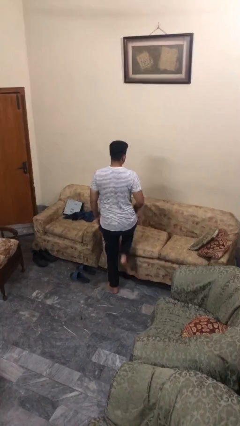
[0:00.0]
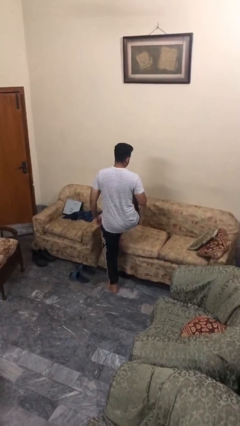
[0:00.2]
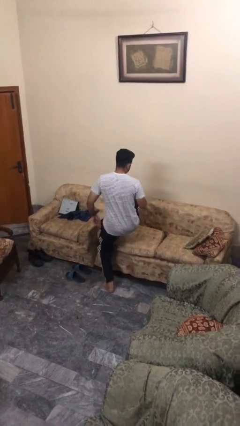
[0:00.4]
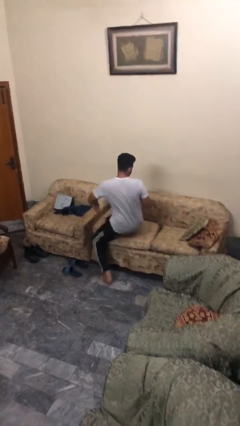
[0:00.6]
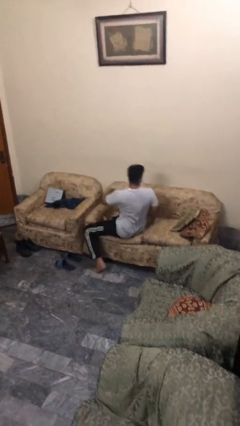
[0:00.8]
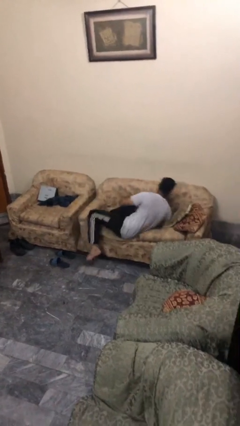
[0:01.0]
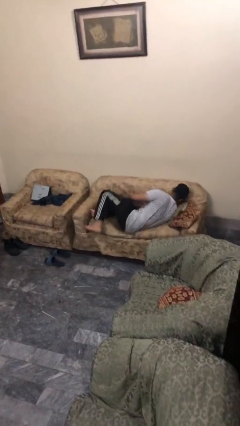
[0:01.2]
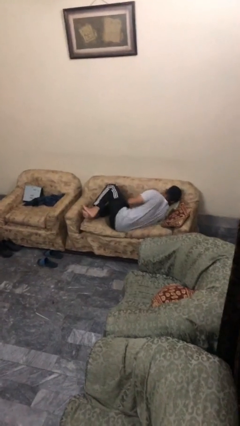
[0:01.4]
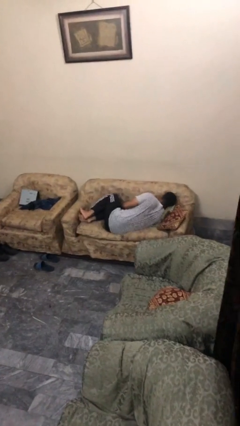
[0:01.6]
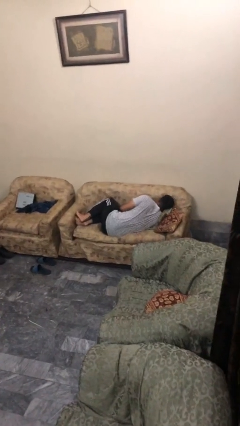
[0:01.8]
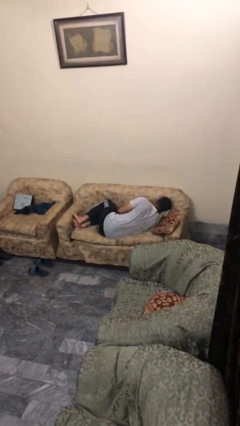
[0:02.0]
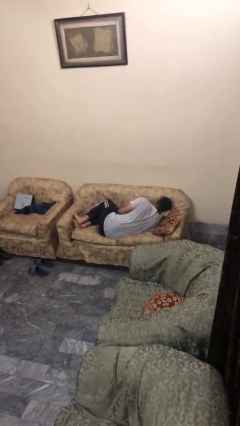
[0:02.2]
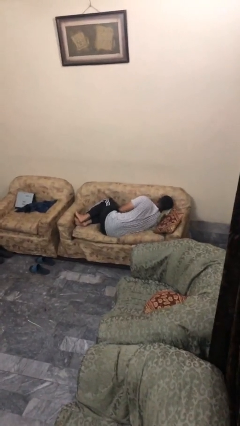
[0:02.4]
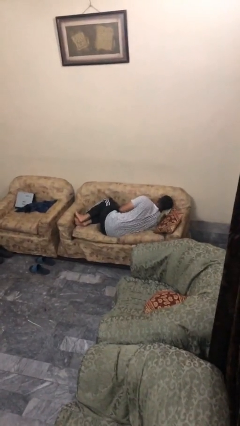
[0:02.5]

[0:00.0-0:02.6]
person lies down on couch

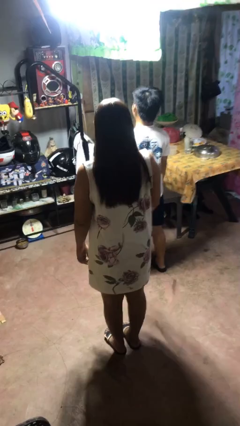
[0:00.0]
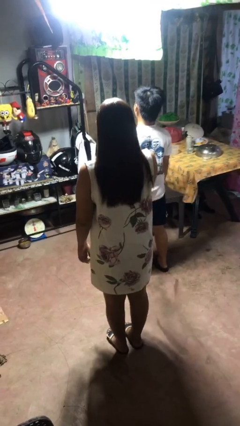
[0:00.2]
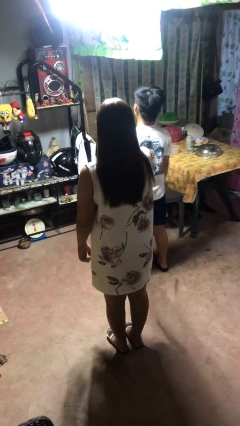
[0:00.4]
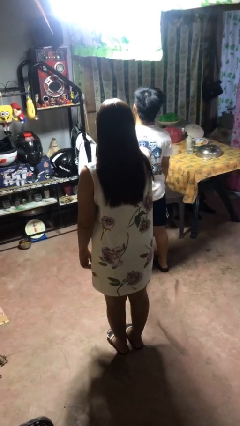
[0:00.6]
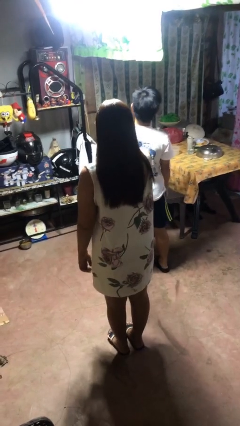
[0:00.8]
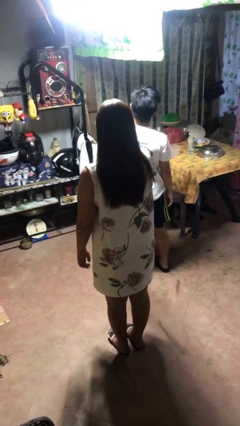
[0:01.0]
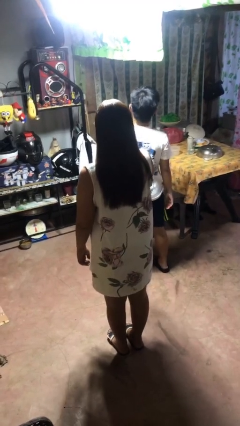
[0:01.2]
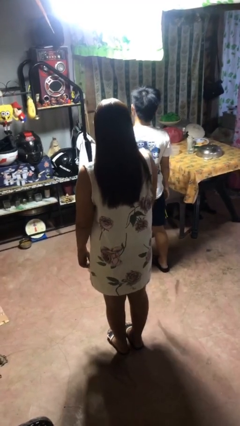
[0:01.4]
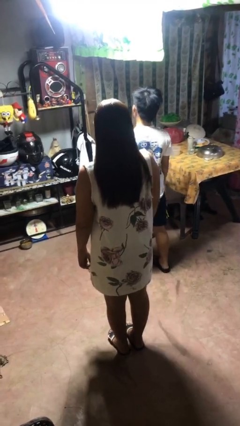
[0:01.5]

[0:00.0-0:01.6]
person shoves person

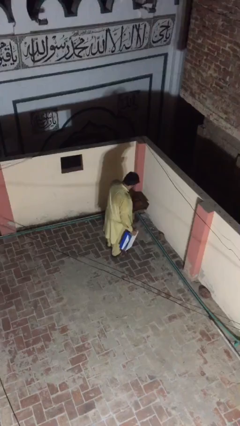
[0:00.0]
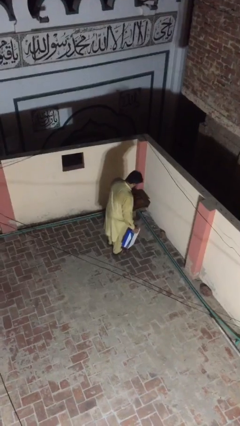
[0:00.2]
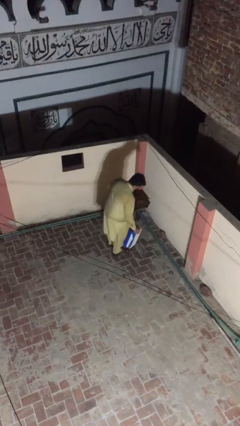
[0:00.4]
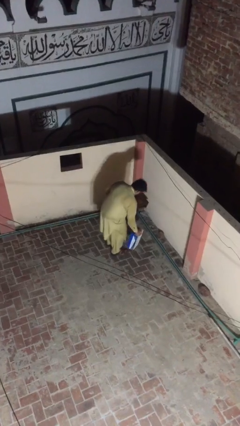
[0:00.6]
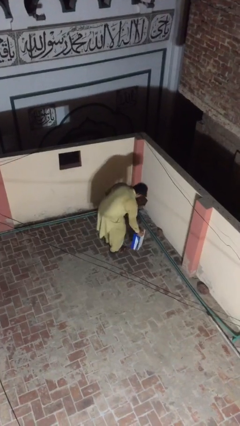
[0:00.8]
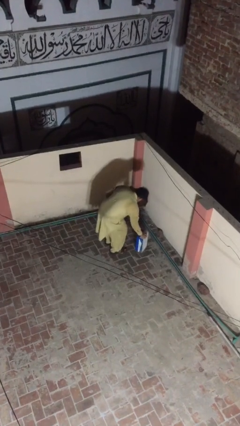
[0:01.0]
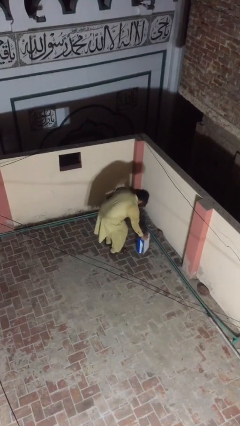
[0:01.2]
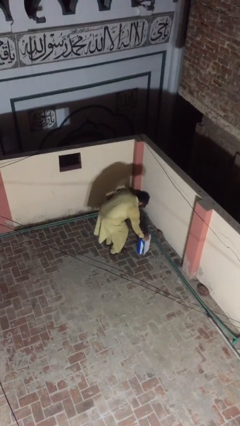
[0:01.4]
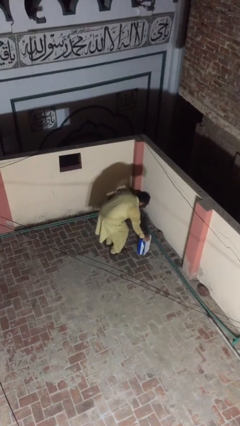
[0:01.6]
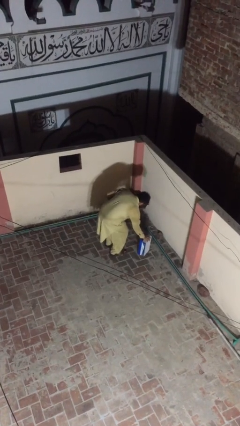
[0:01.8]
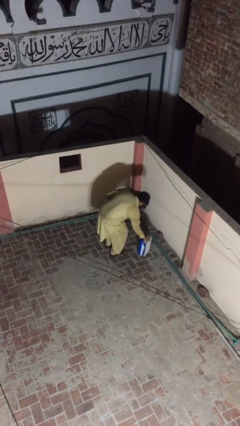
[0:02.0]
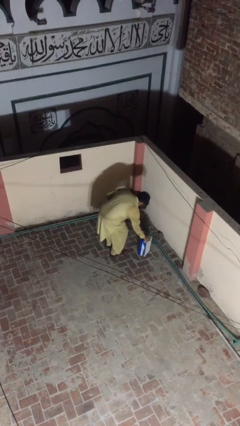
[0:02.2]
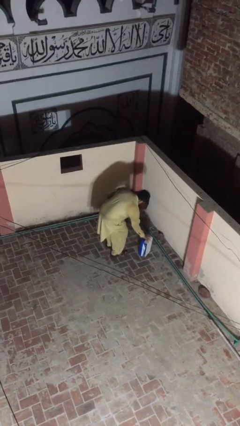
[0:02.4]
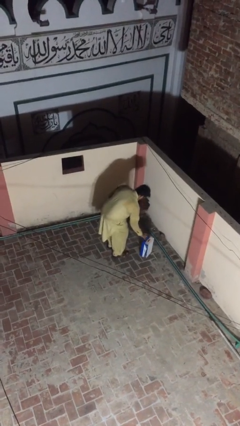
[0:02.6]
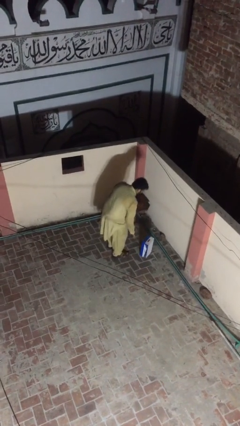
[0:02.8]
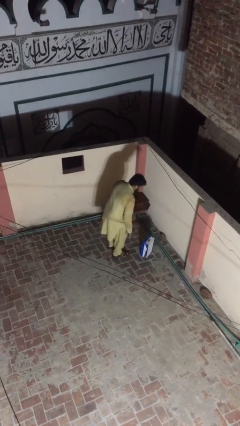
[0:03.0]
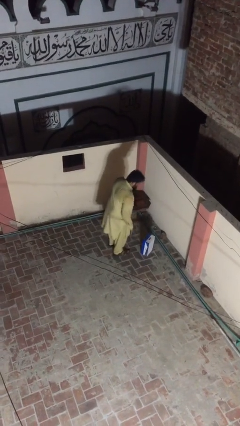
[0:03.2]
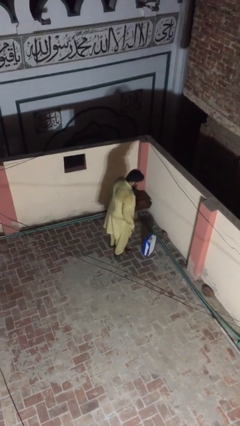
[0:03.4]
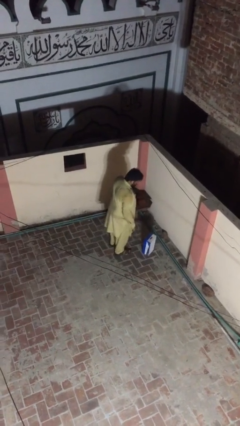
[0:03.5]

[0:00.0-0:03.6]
person puts down object on floor

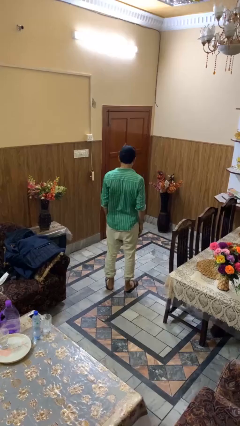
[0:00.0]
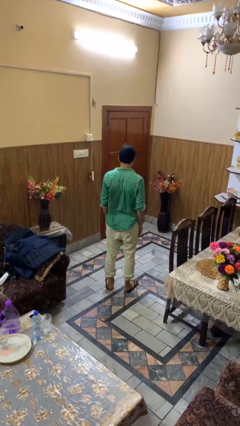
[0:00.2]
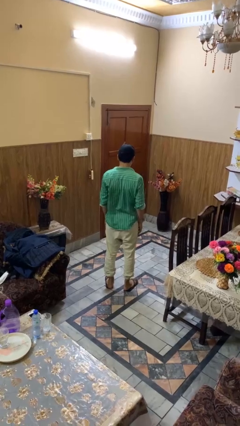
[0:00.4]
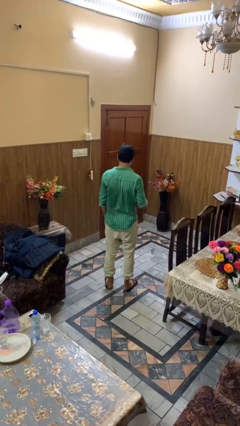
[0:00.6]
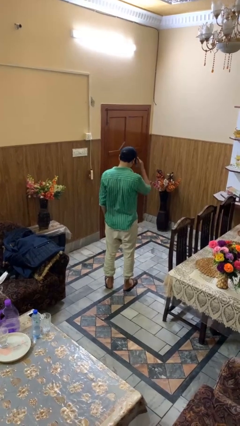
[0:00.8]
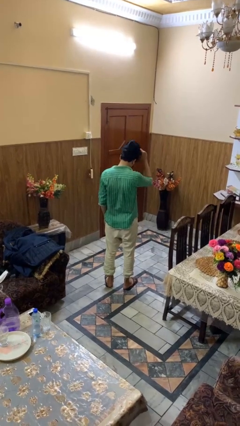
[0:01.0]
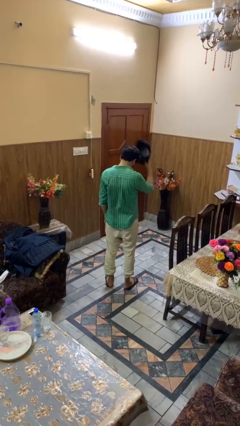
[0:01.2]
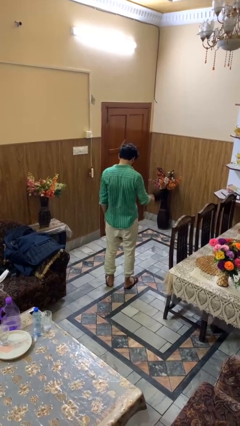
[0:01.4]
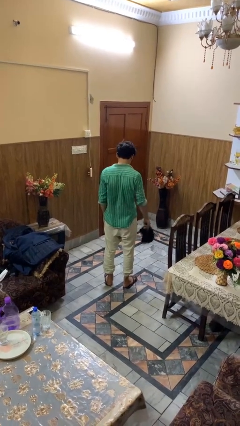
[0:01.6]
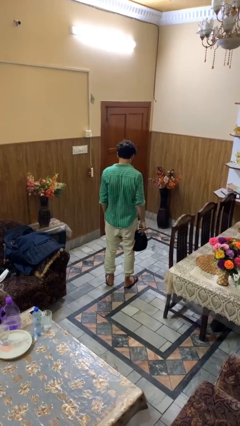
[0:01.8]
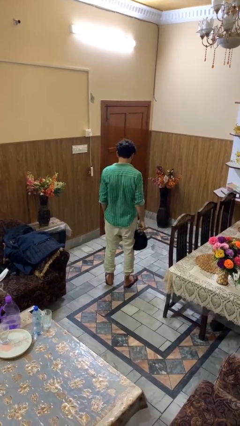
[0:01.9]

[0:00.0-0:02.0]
person takes off hat

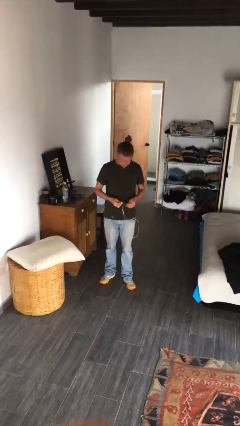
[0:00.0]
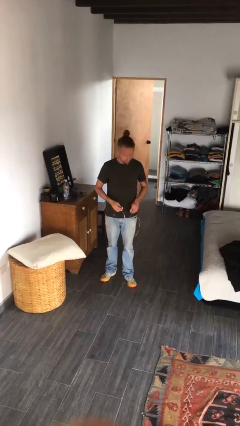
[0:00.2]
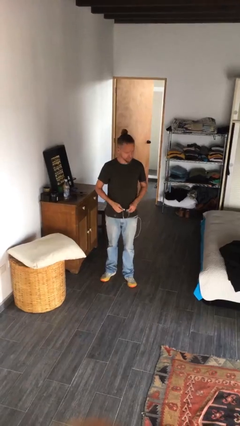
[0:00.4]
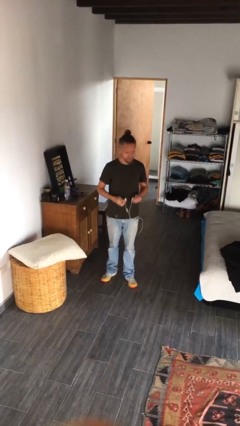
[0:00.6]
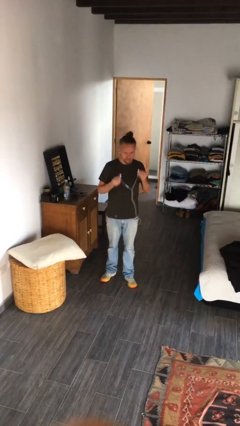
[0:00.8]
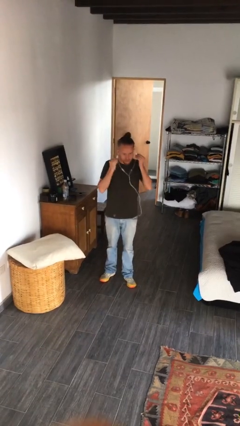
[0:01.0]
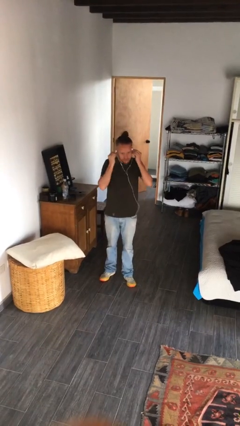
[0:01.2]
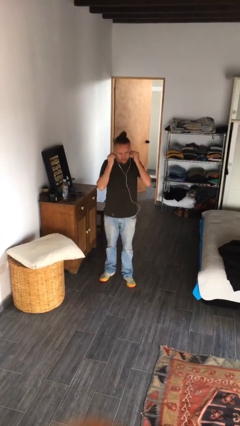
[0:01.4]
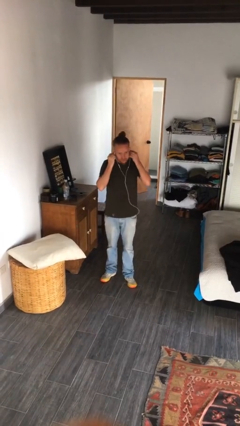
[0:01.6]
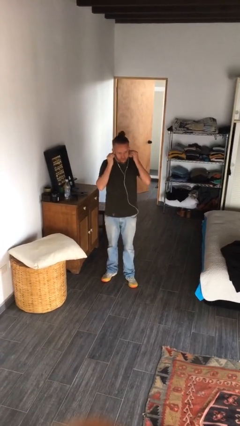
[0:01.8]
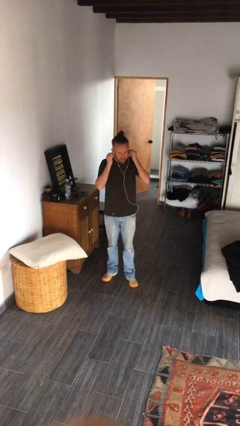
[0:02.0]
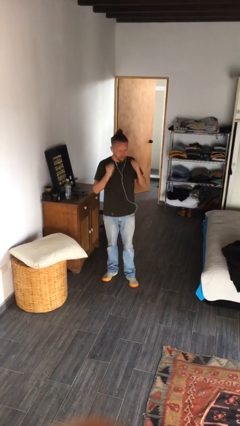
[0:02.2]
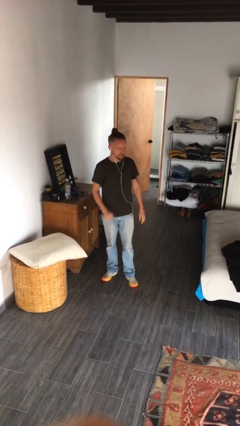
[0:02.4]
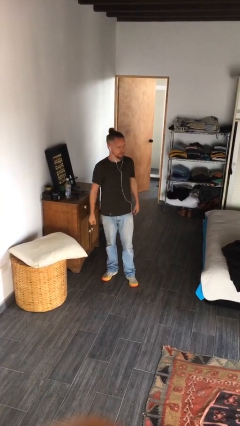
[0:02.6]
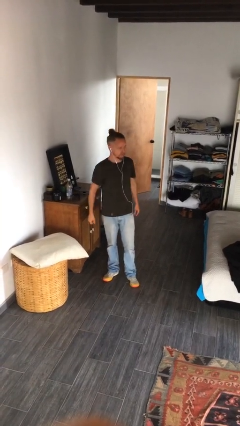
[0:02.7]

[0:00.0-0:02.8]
person puts on headphones

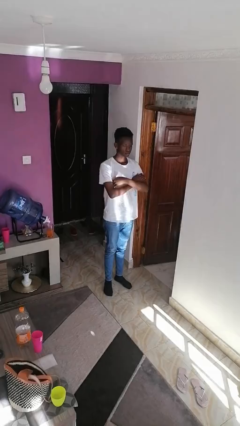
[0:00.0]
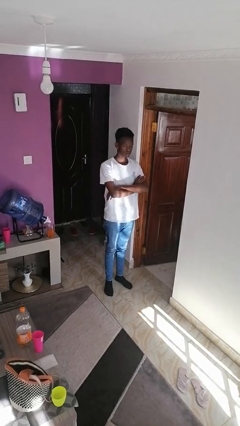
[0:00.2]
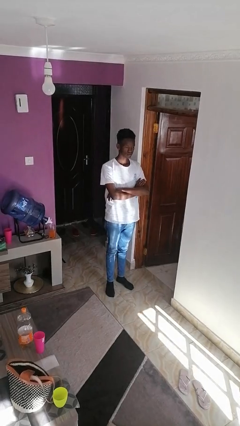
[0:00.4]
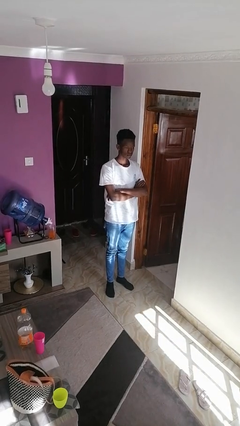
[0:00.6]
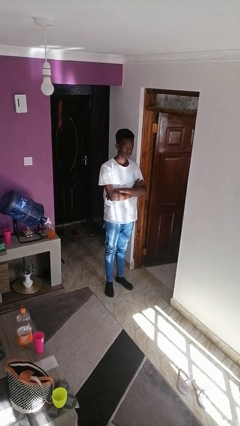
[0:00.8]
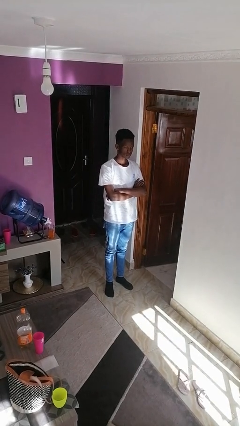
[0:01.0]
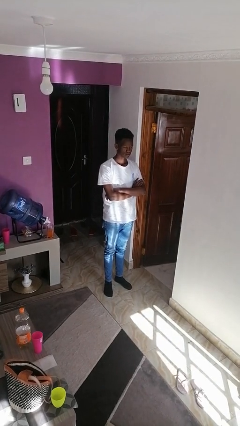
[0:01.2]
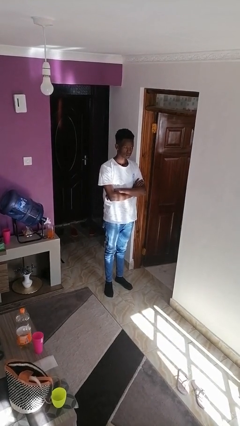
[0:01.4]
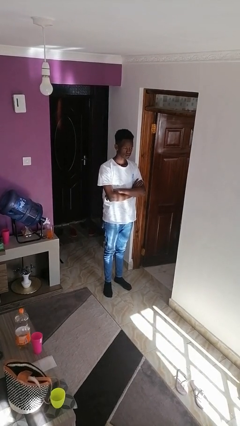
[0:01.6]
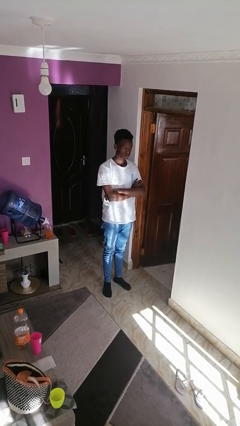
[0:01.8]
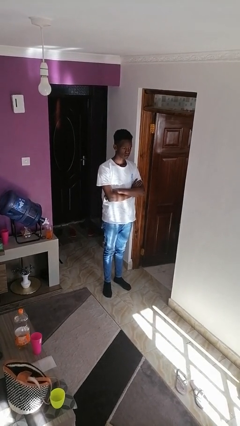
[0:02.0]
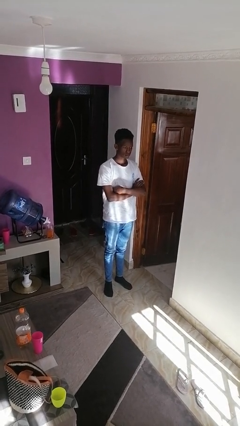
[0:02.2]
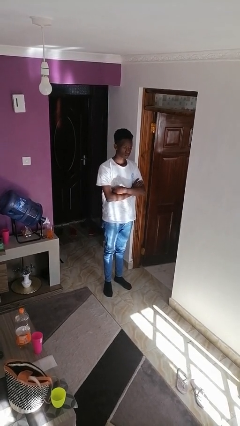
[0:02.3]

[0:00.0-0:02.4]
person crosses arms

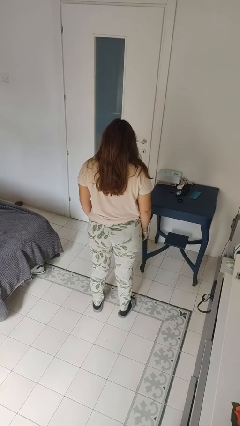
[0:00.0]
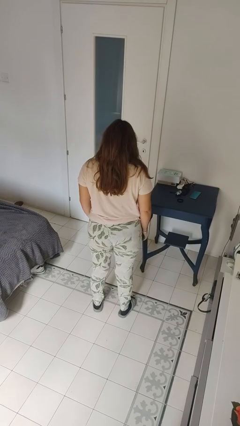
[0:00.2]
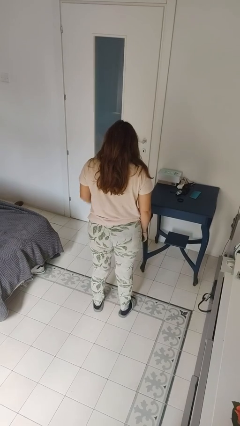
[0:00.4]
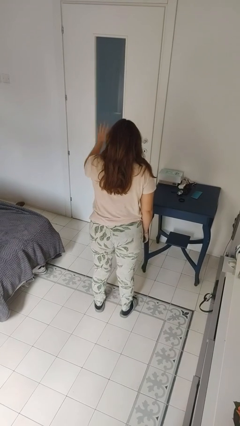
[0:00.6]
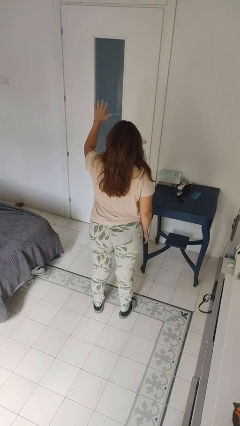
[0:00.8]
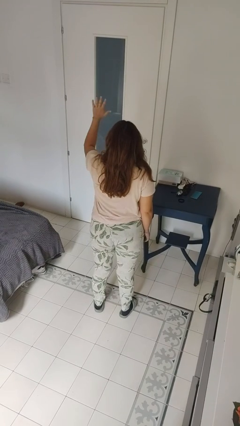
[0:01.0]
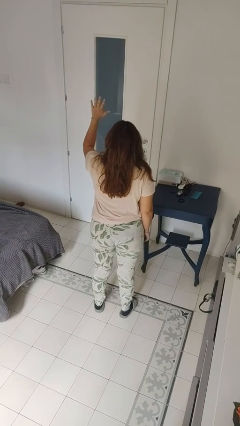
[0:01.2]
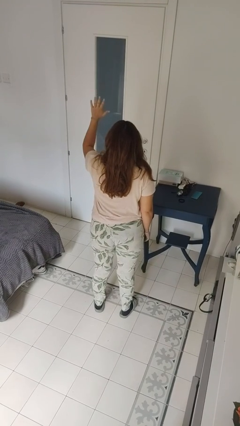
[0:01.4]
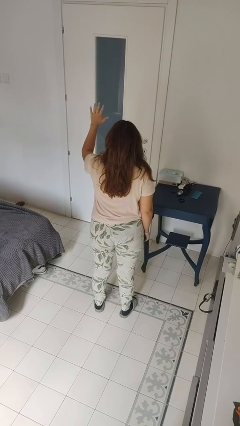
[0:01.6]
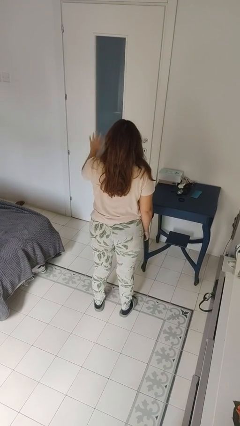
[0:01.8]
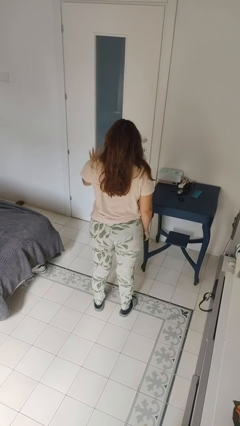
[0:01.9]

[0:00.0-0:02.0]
person gestures number five

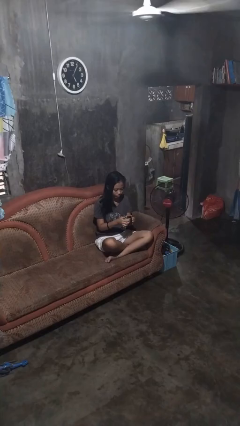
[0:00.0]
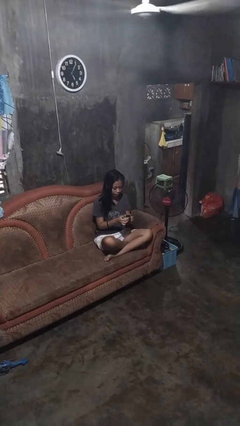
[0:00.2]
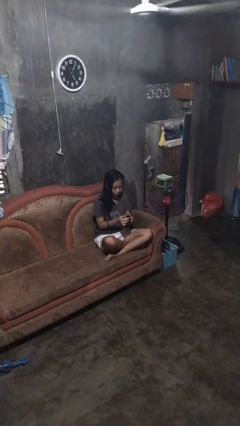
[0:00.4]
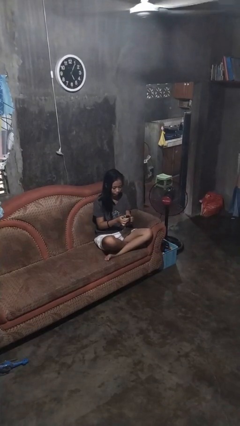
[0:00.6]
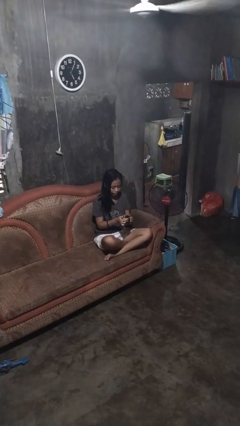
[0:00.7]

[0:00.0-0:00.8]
person drinks from mug
